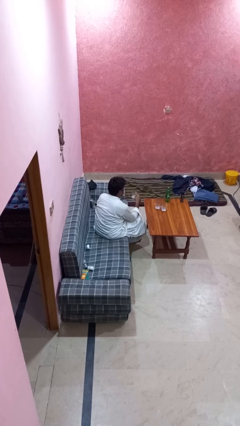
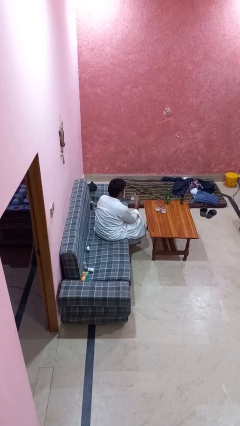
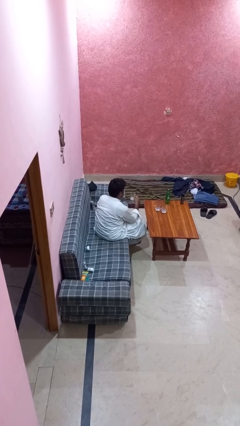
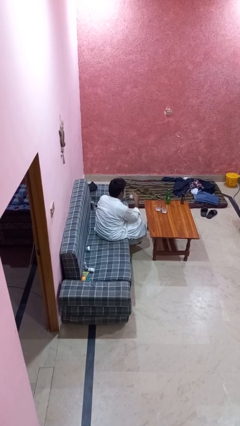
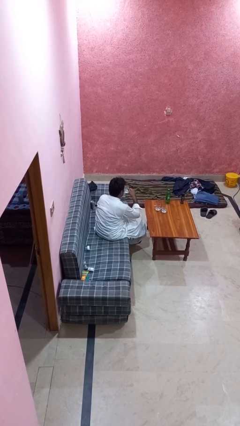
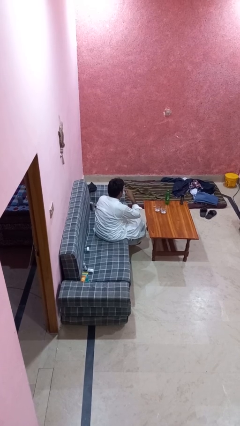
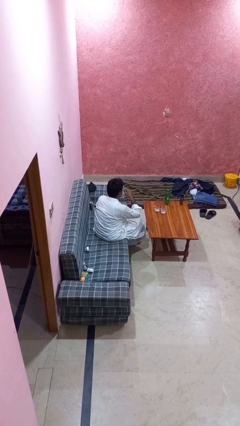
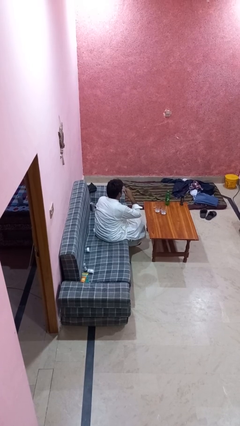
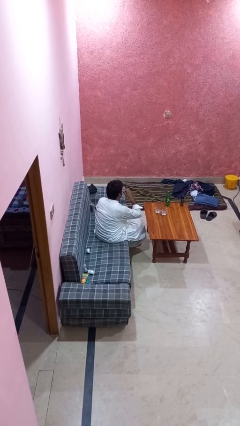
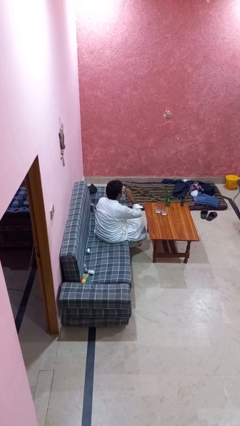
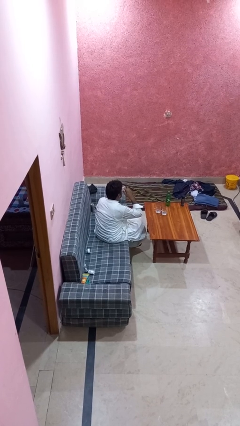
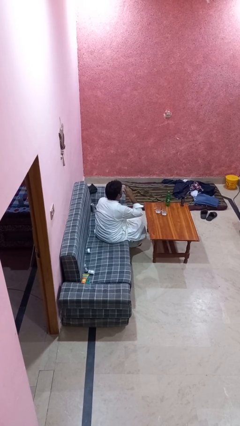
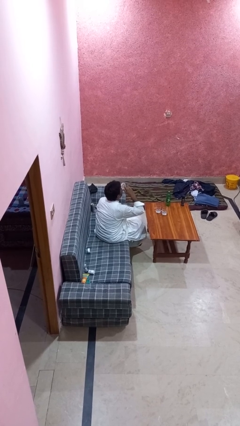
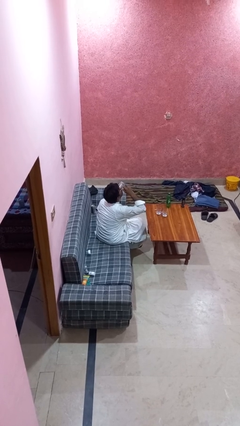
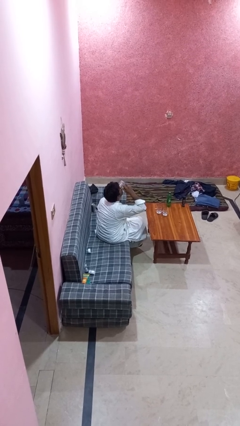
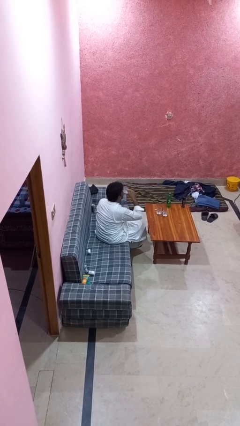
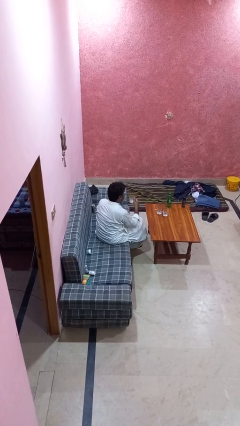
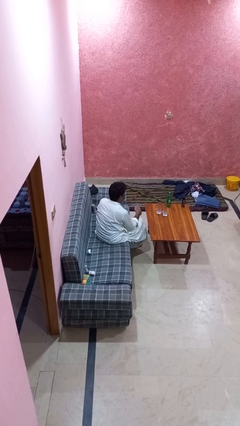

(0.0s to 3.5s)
person drinks from shotglass

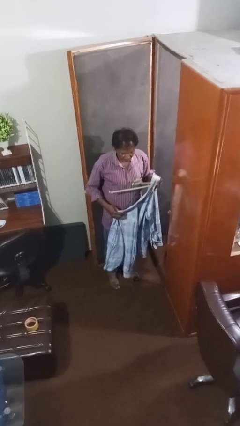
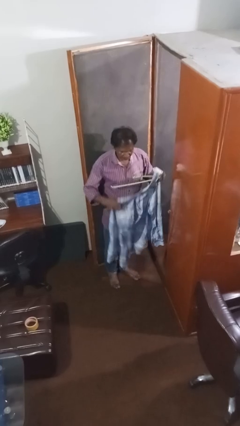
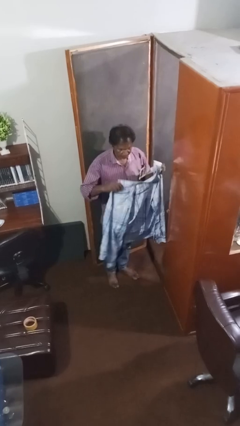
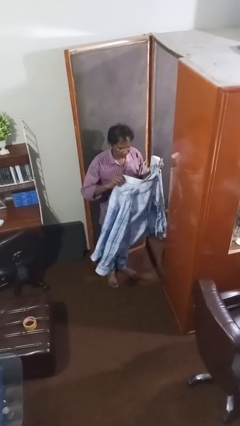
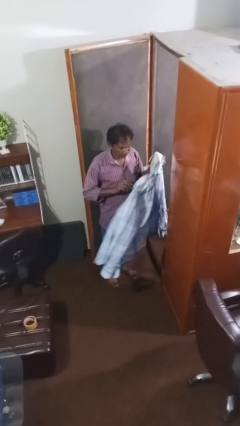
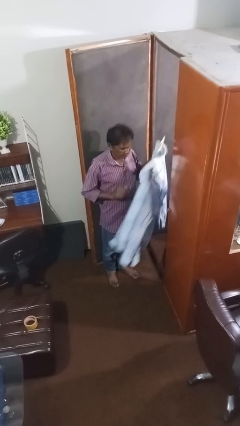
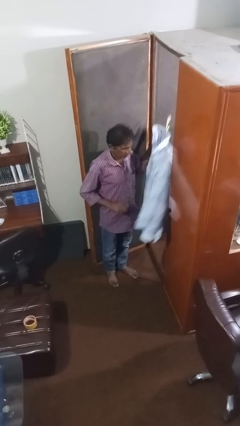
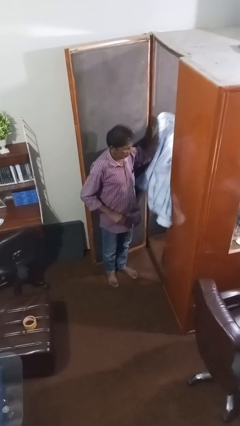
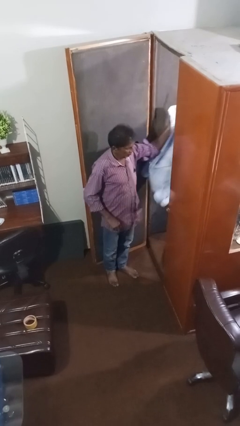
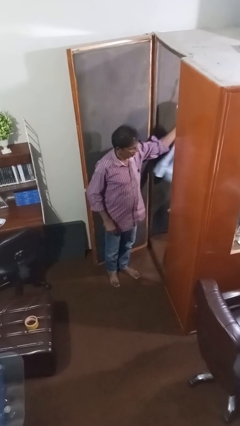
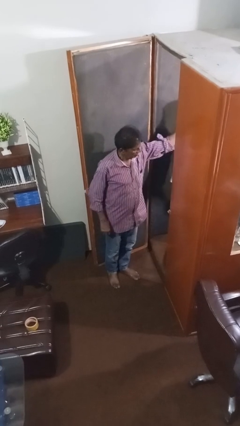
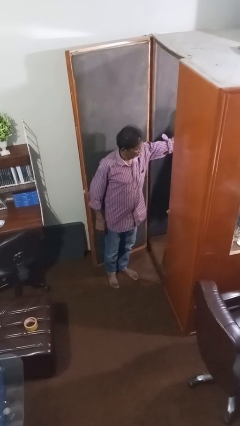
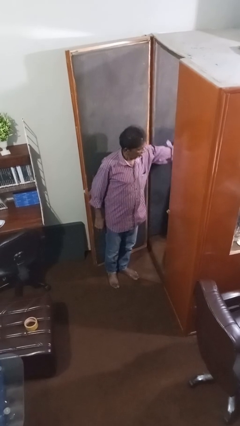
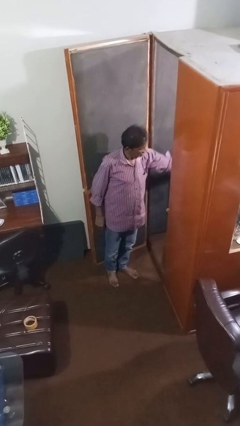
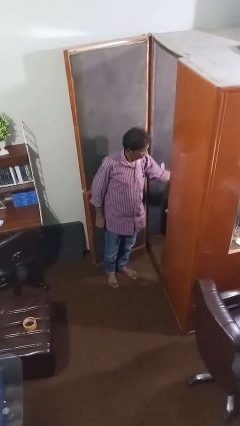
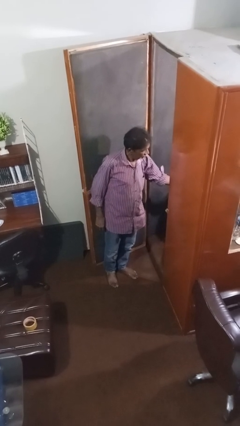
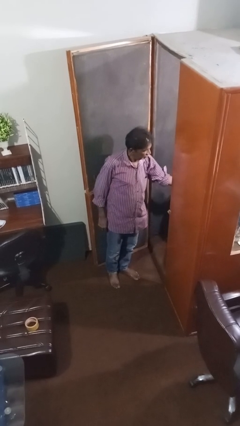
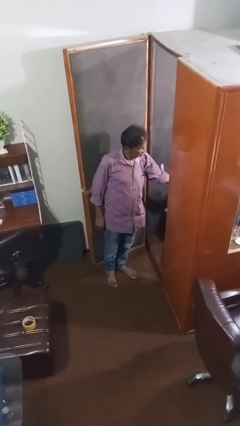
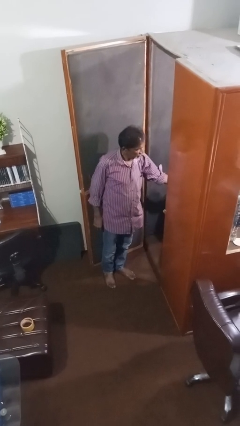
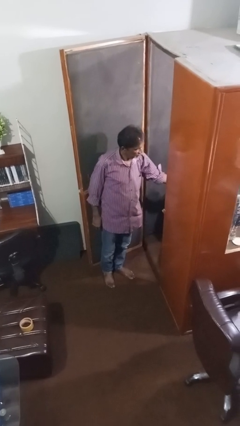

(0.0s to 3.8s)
person puts clothes into closet

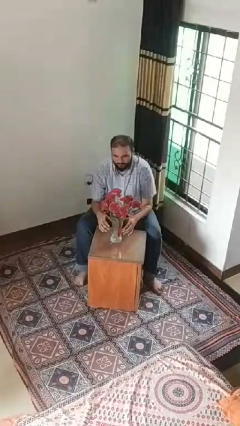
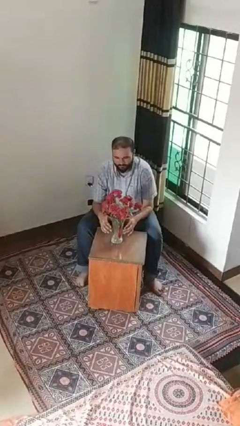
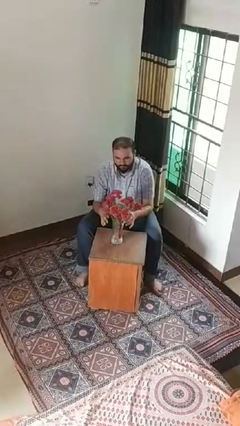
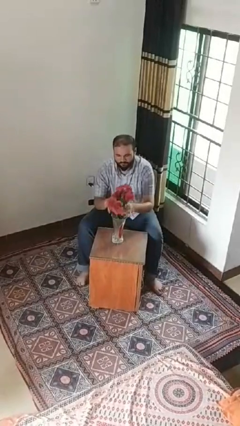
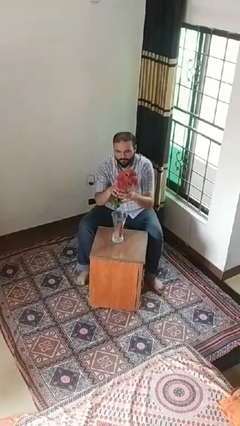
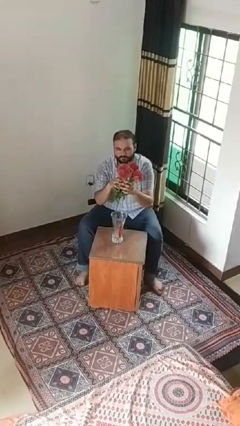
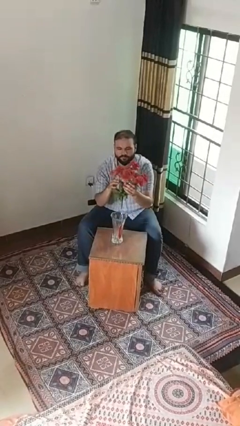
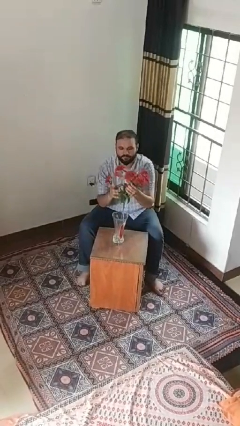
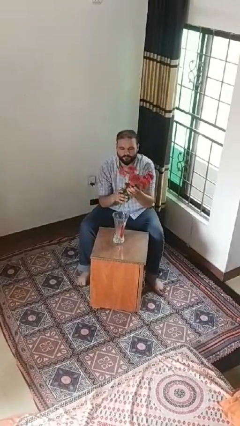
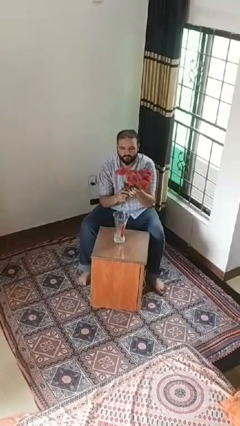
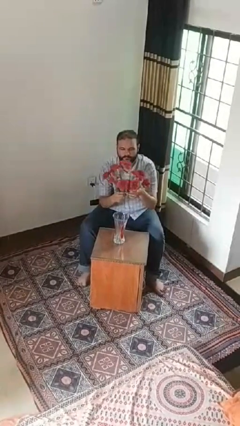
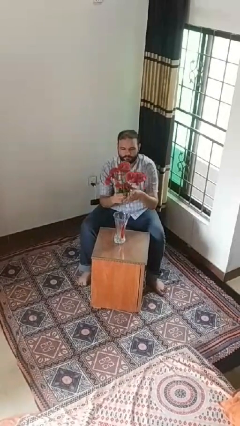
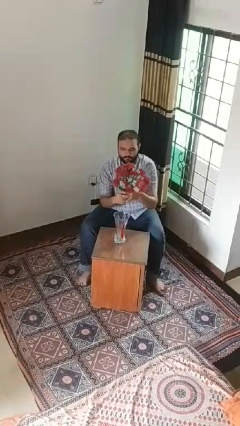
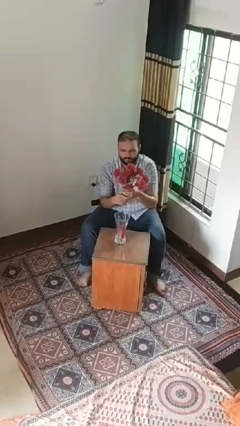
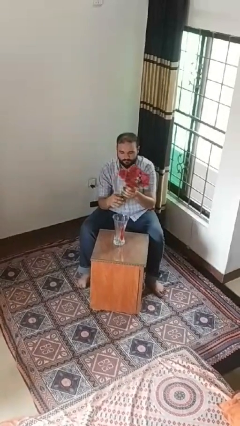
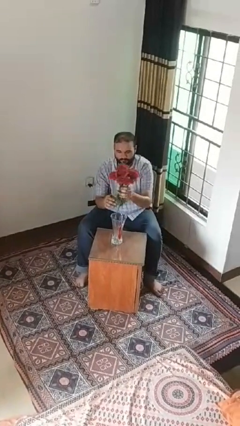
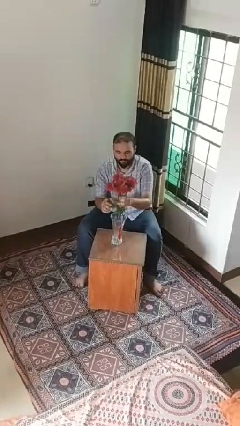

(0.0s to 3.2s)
person arranges flowers in vase

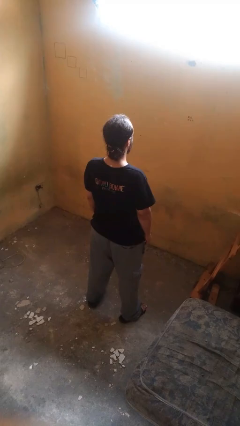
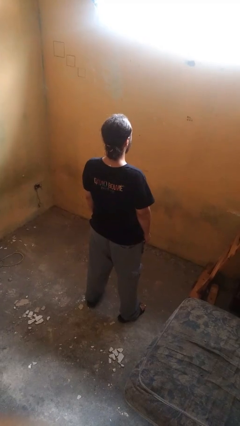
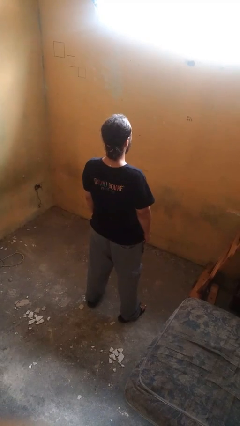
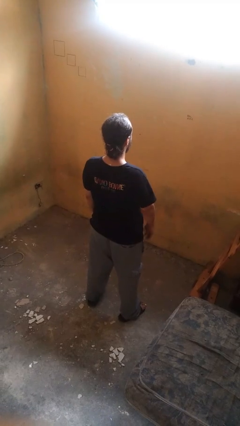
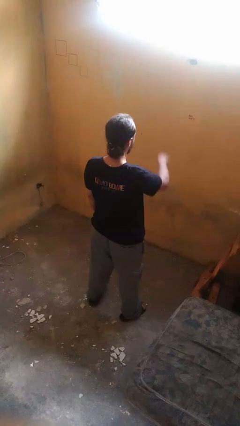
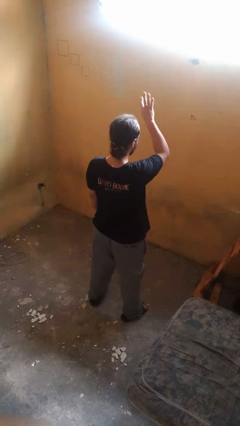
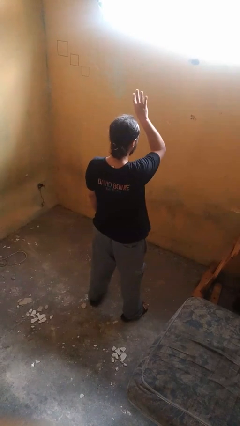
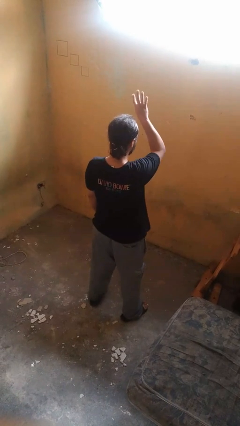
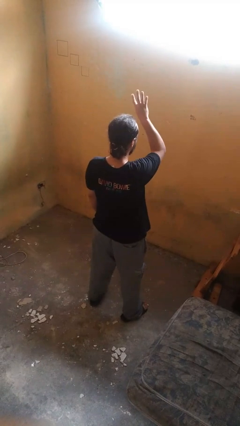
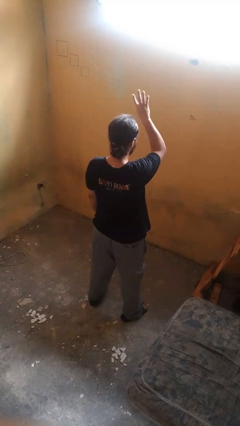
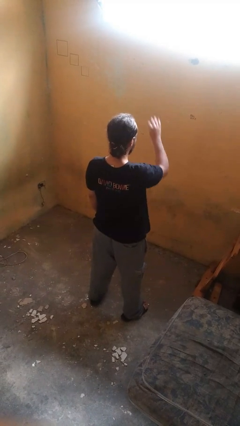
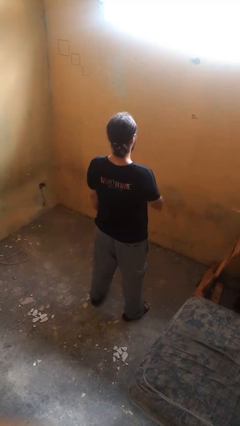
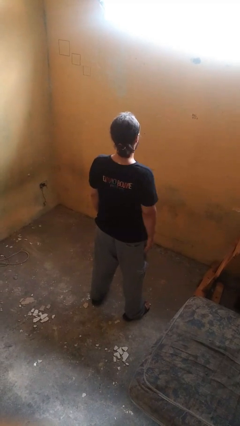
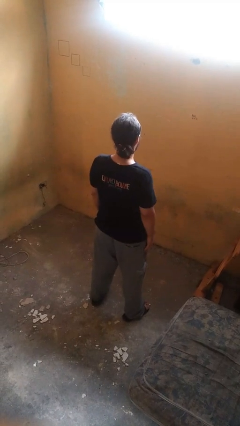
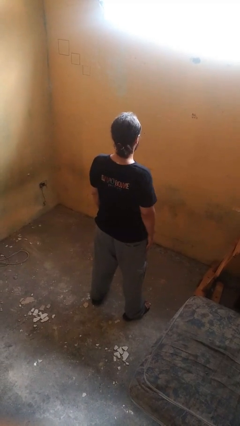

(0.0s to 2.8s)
person gestures number four

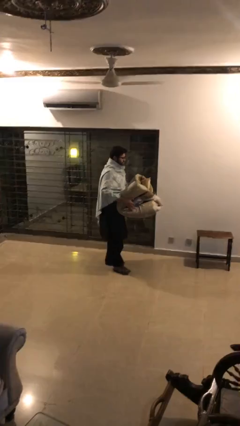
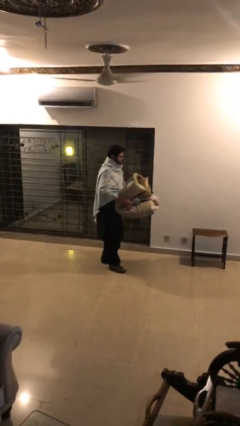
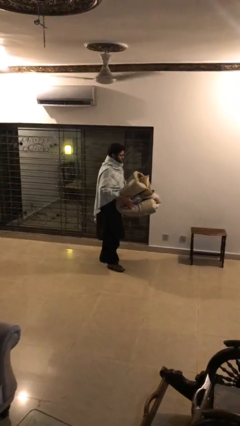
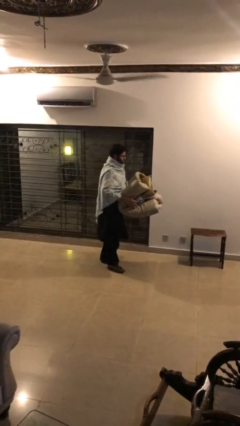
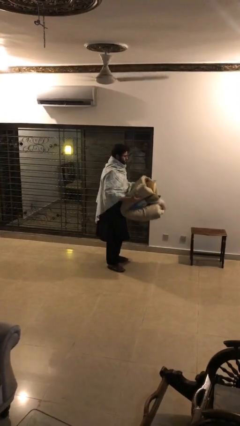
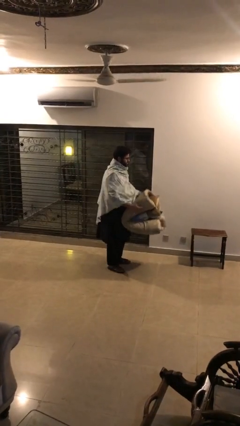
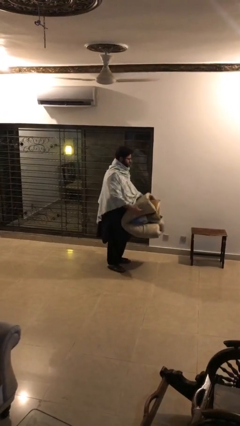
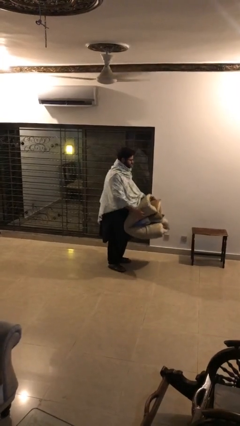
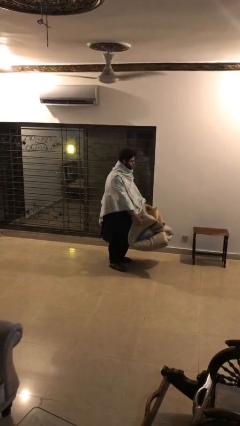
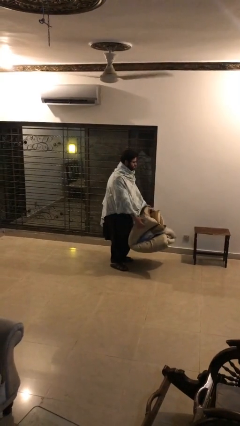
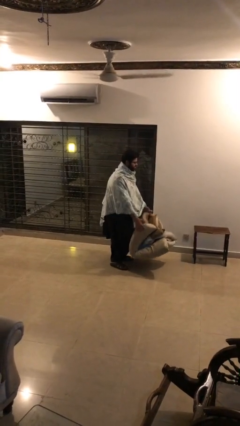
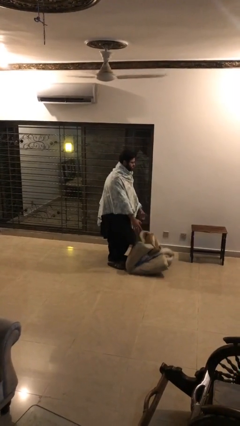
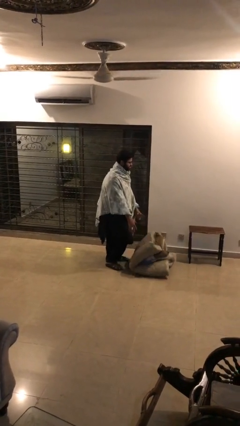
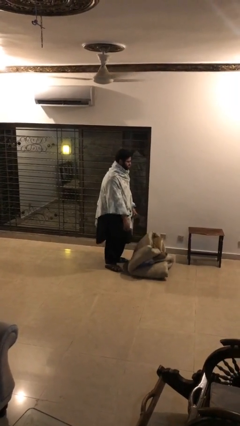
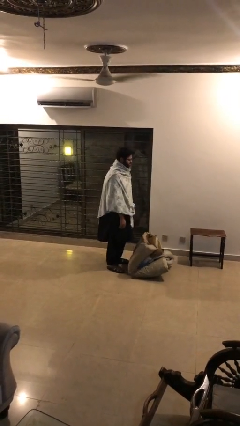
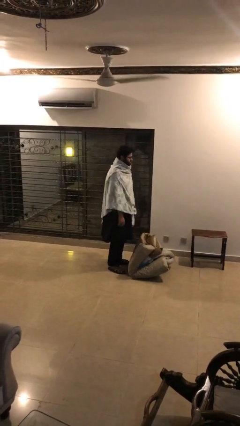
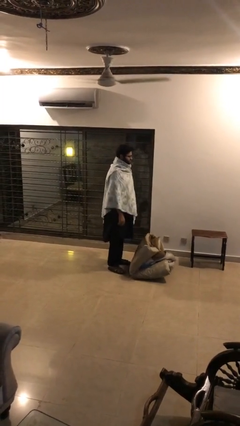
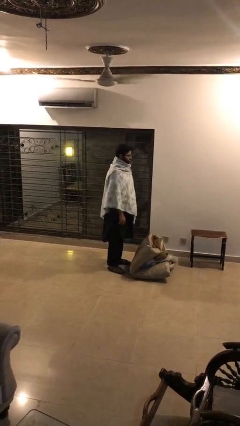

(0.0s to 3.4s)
person puts down object on floor

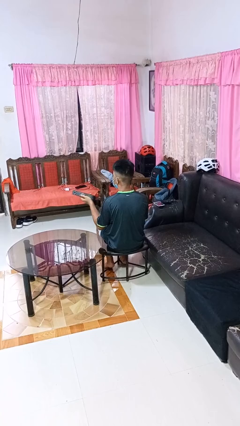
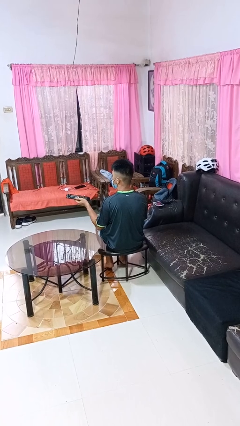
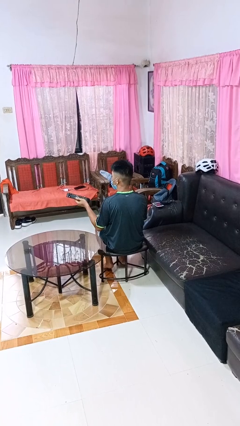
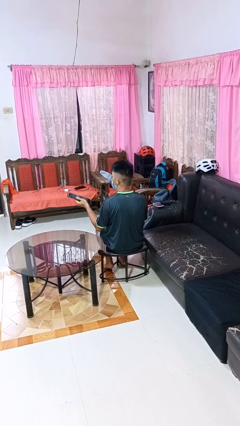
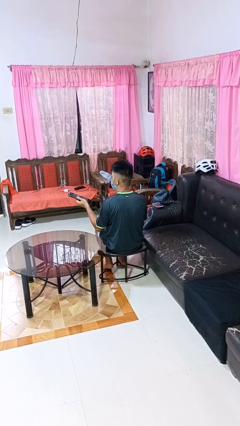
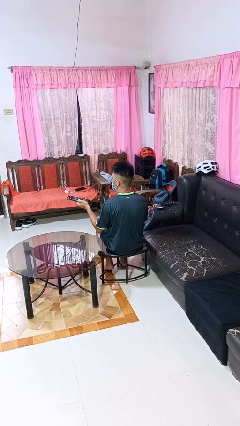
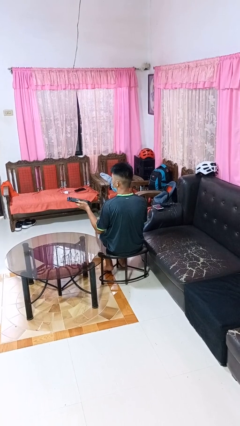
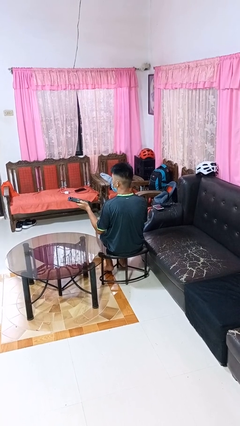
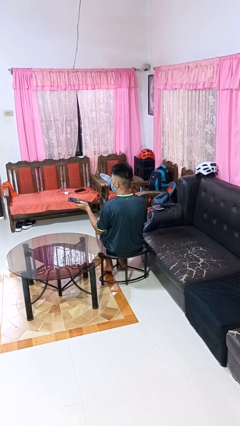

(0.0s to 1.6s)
person uses television remote
